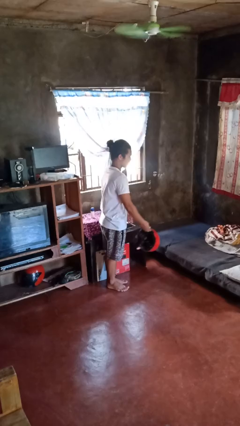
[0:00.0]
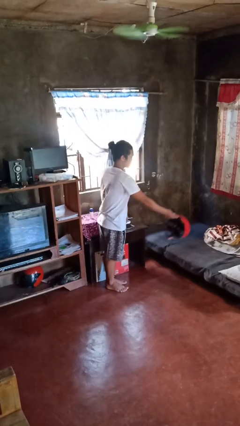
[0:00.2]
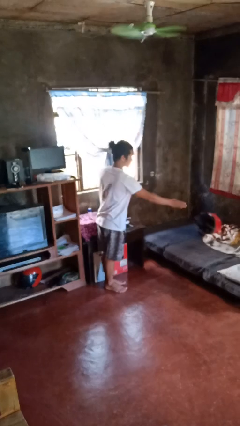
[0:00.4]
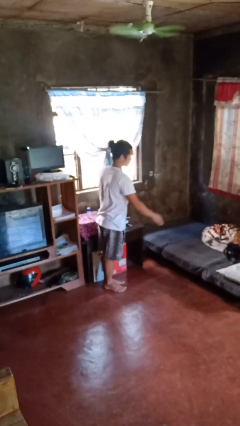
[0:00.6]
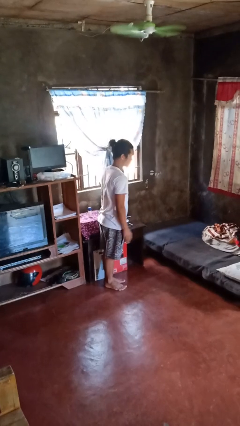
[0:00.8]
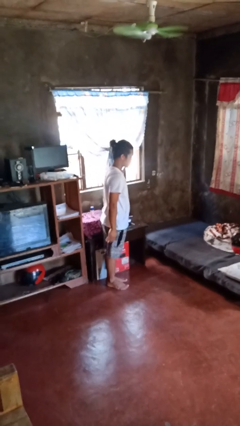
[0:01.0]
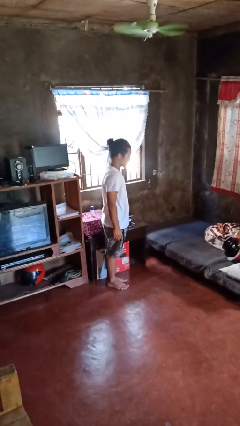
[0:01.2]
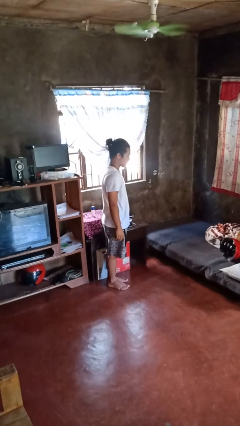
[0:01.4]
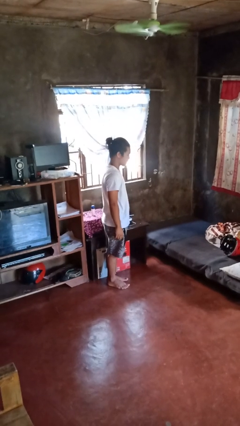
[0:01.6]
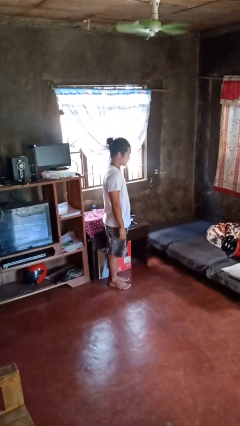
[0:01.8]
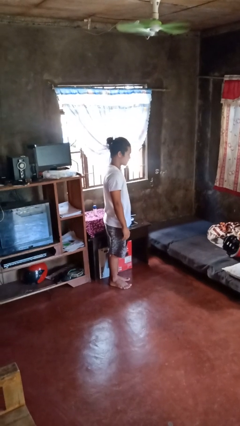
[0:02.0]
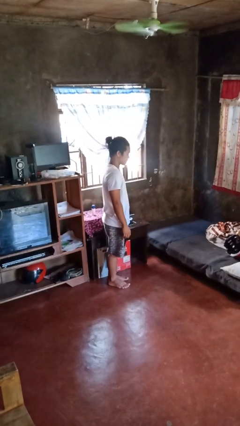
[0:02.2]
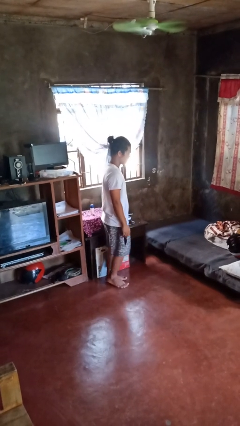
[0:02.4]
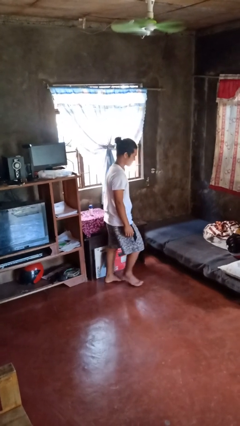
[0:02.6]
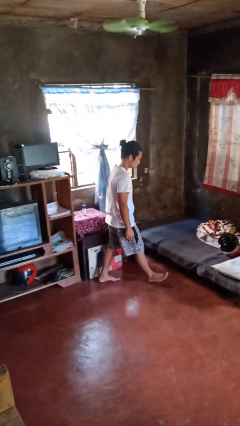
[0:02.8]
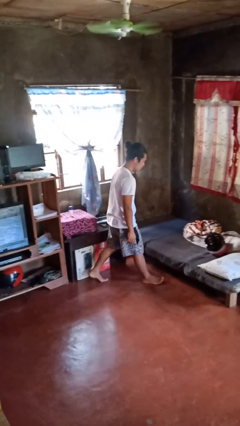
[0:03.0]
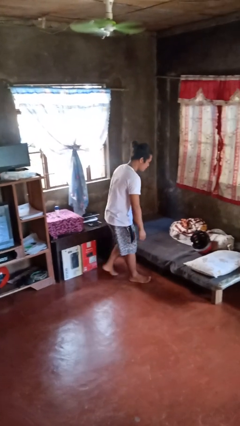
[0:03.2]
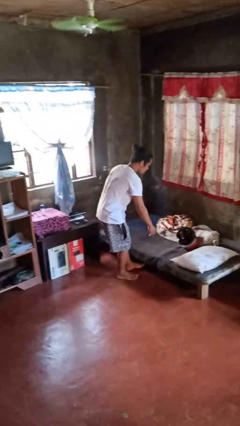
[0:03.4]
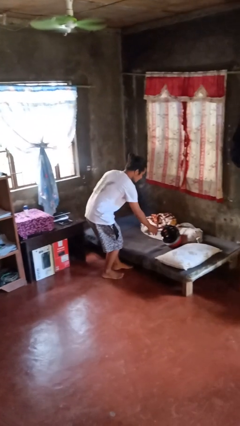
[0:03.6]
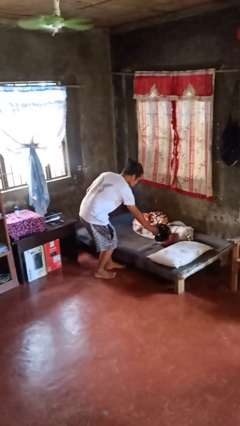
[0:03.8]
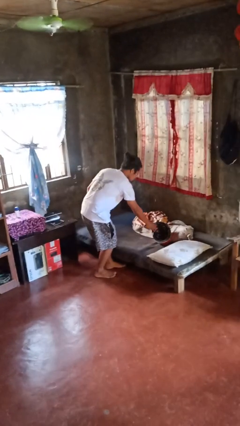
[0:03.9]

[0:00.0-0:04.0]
person throws object on bed

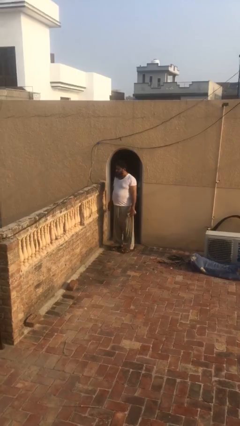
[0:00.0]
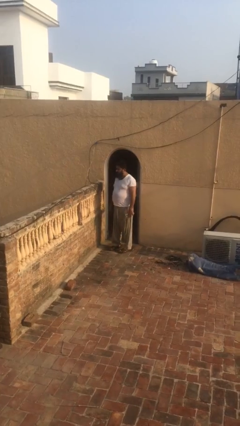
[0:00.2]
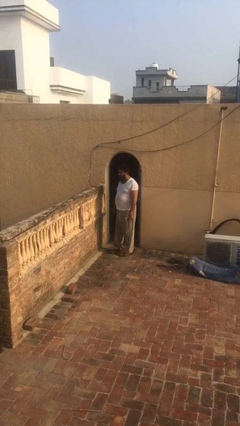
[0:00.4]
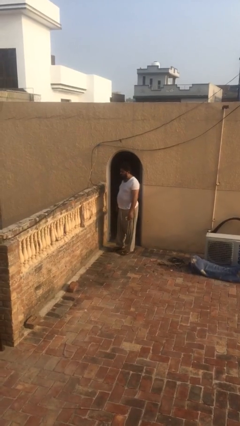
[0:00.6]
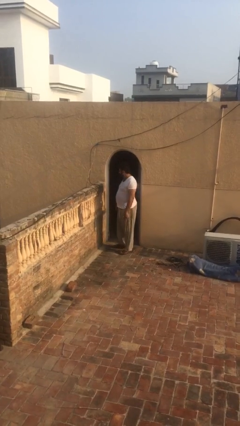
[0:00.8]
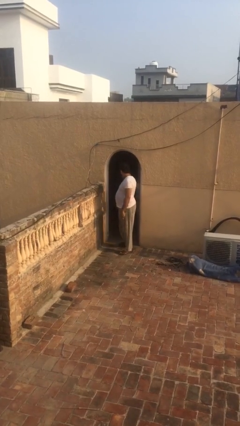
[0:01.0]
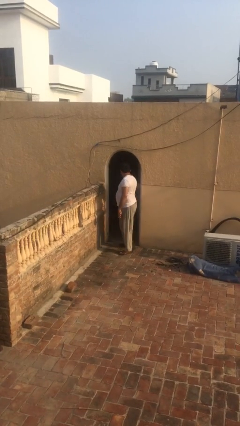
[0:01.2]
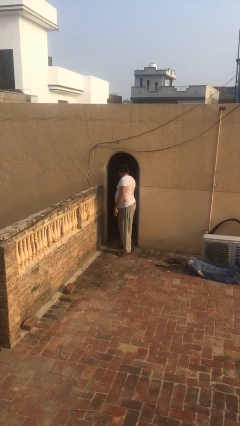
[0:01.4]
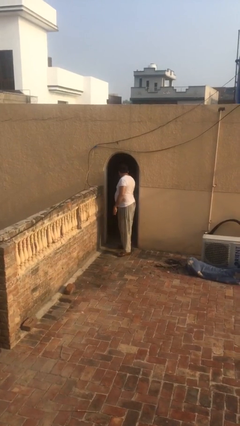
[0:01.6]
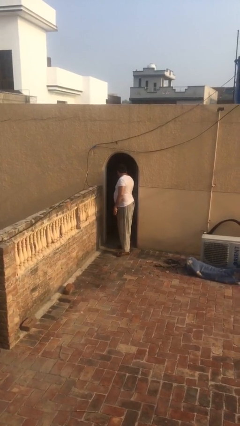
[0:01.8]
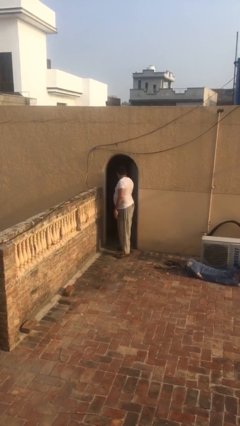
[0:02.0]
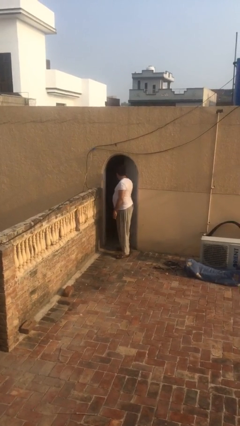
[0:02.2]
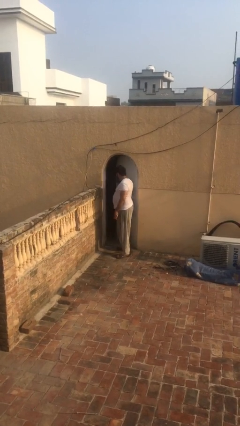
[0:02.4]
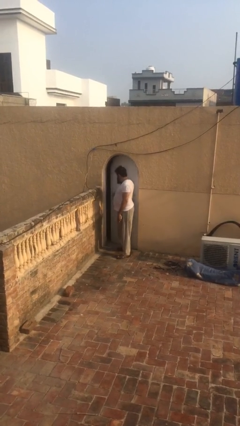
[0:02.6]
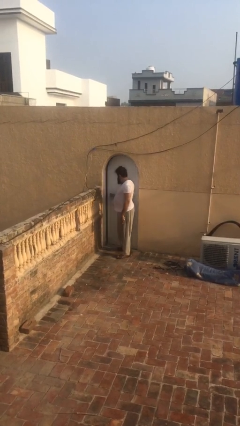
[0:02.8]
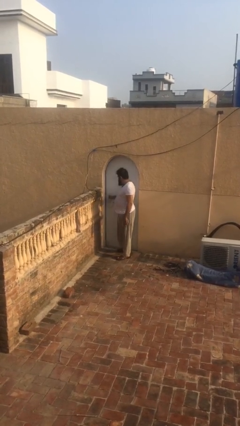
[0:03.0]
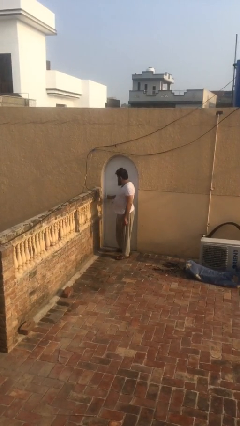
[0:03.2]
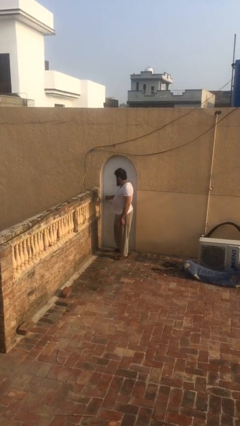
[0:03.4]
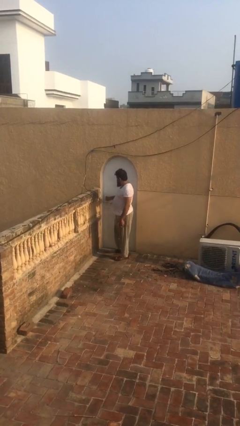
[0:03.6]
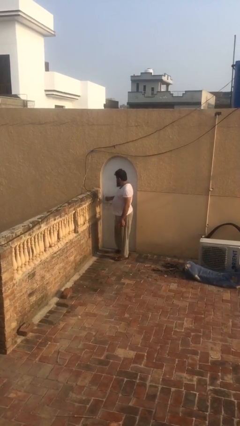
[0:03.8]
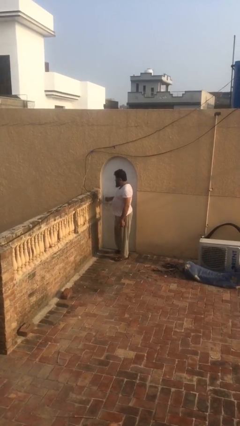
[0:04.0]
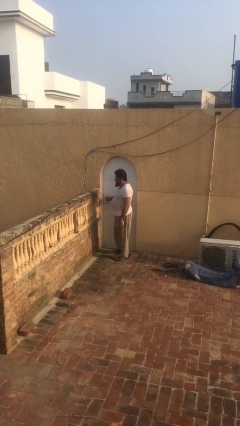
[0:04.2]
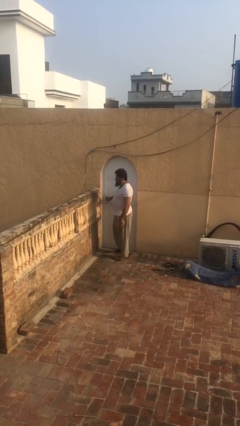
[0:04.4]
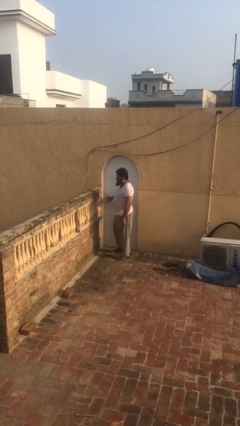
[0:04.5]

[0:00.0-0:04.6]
person closes facility door

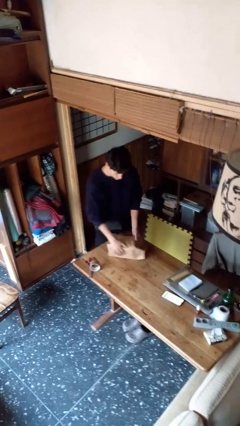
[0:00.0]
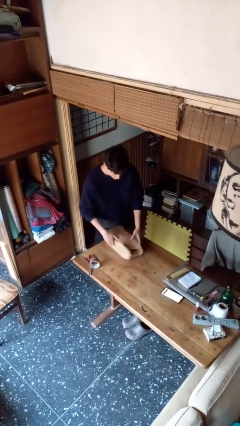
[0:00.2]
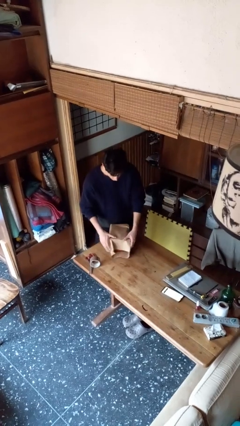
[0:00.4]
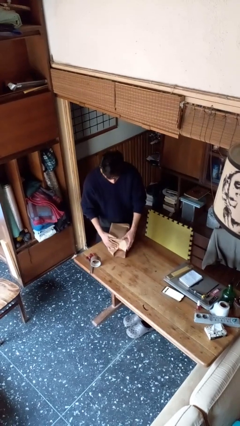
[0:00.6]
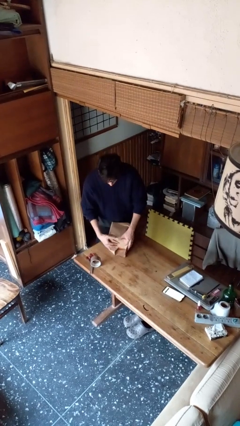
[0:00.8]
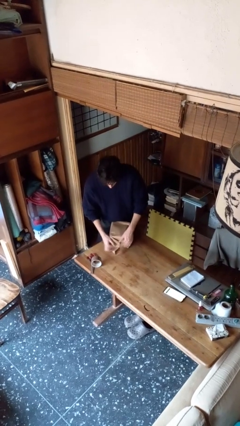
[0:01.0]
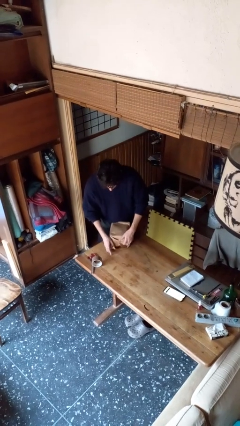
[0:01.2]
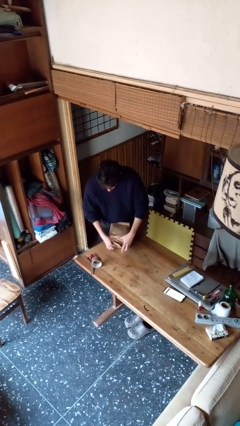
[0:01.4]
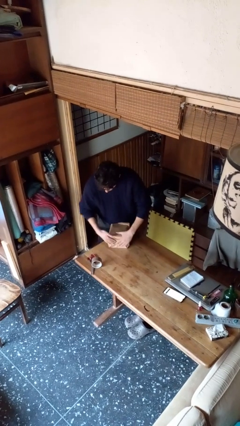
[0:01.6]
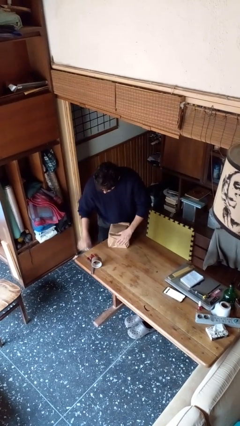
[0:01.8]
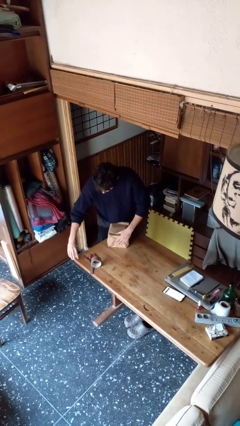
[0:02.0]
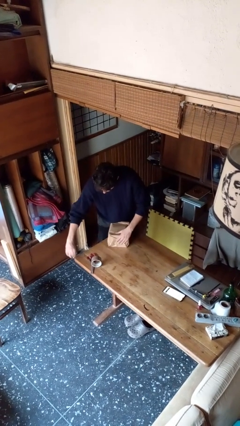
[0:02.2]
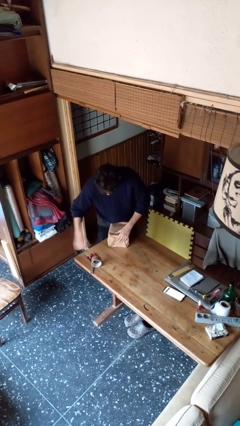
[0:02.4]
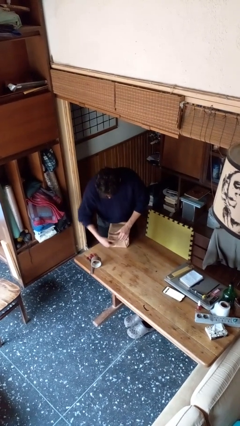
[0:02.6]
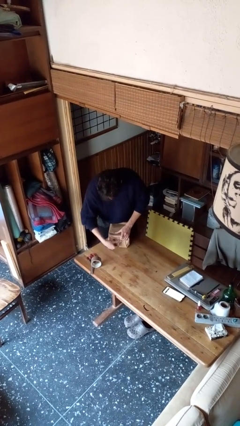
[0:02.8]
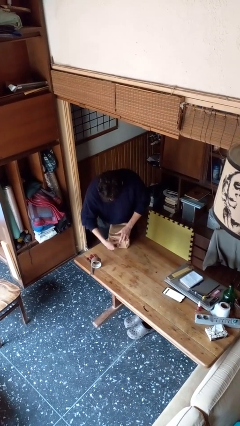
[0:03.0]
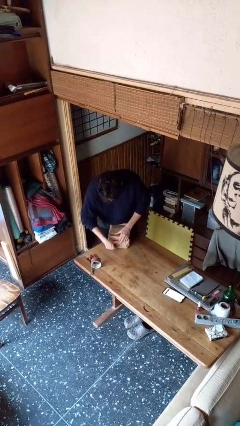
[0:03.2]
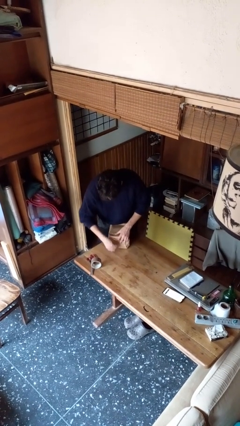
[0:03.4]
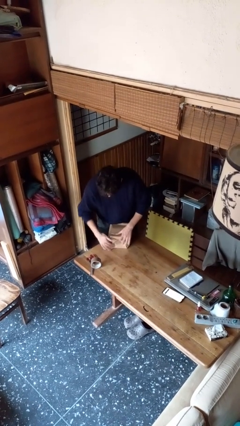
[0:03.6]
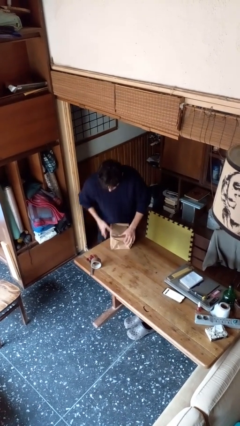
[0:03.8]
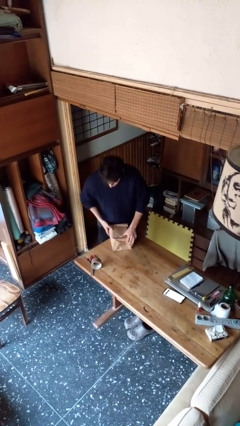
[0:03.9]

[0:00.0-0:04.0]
person wraps box

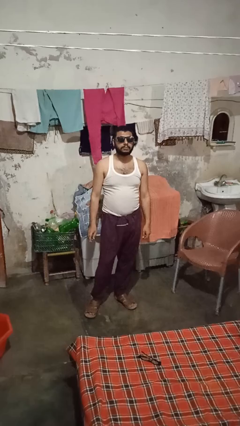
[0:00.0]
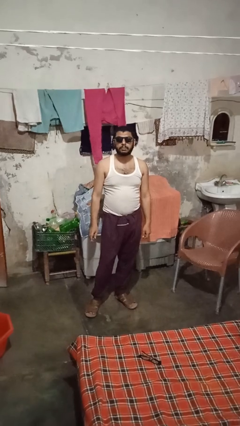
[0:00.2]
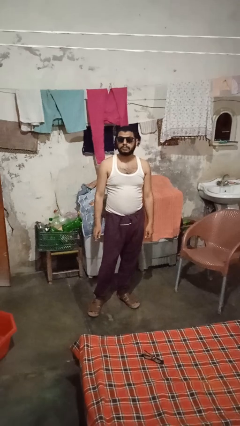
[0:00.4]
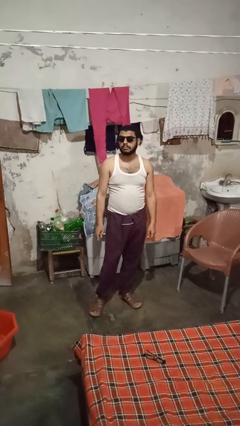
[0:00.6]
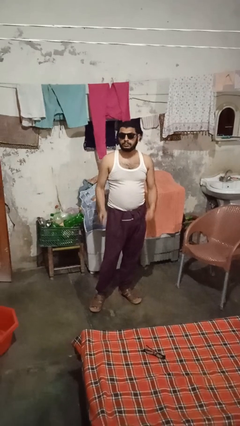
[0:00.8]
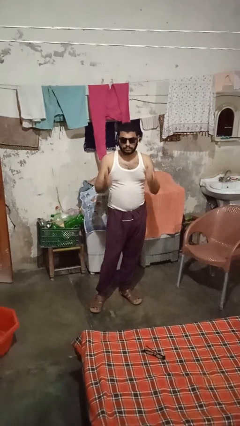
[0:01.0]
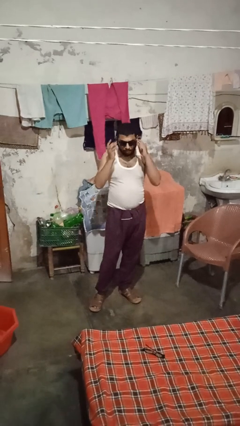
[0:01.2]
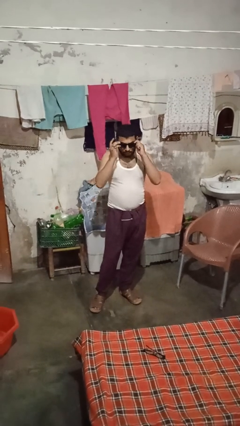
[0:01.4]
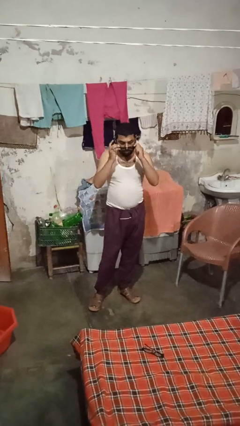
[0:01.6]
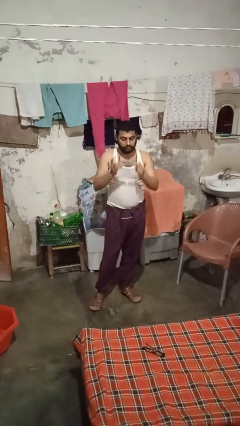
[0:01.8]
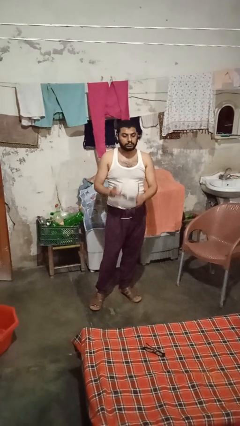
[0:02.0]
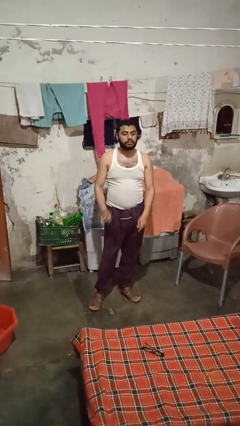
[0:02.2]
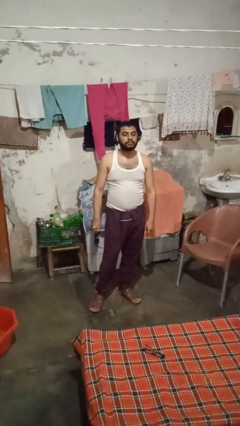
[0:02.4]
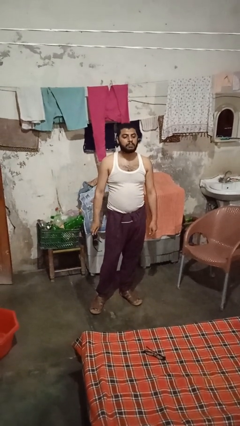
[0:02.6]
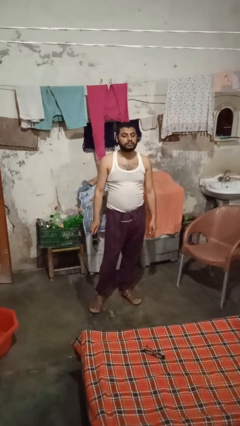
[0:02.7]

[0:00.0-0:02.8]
person takes off sunglasses

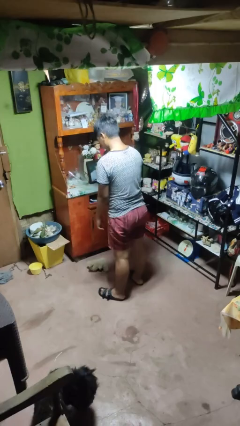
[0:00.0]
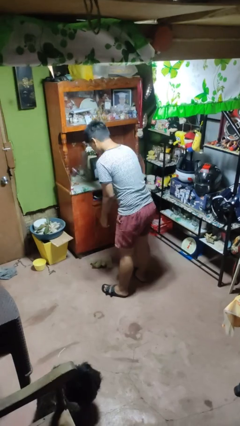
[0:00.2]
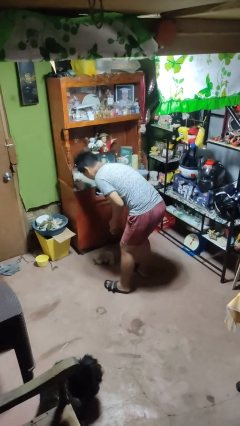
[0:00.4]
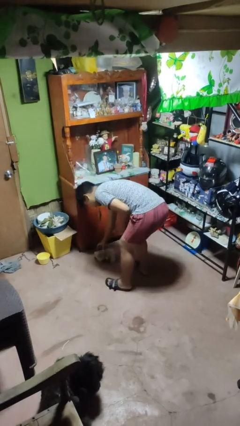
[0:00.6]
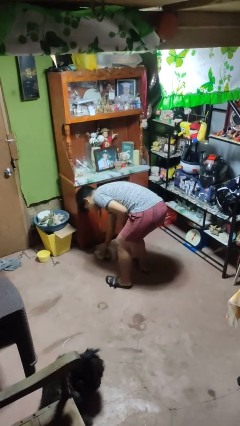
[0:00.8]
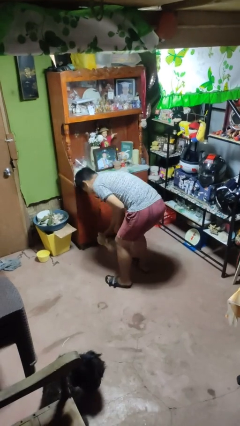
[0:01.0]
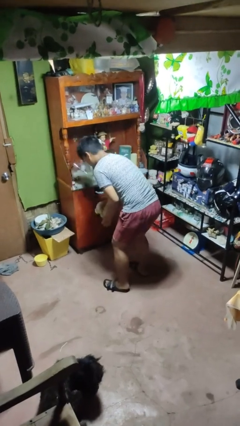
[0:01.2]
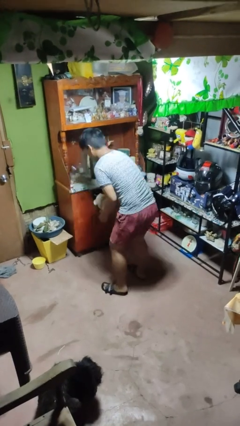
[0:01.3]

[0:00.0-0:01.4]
person picks up object from floor

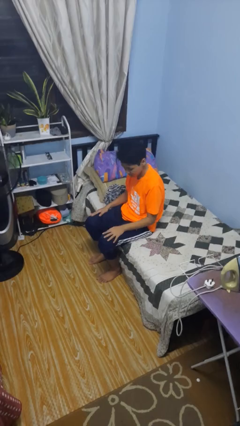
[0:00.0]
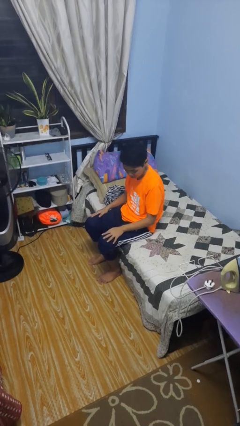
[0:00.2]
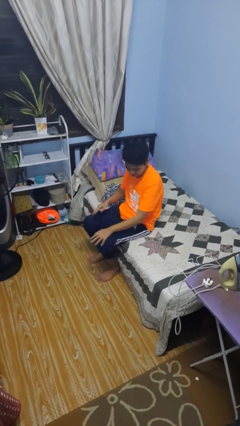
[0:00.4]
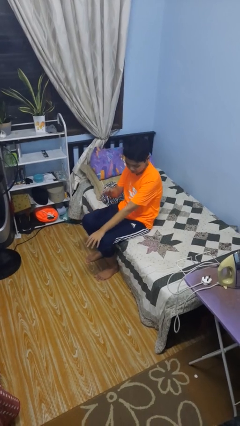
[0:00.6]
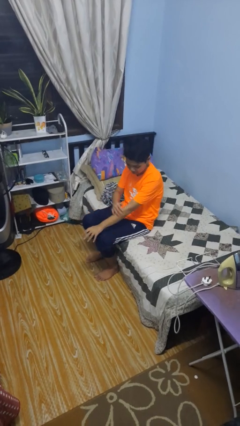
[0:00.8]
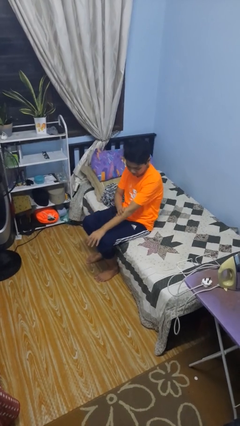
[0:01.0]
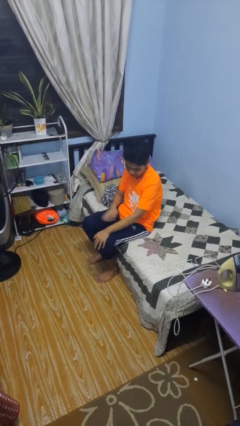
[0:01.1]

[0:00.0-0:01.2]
person swats bug
